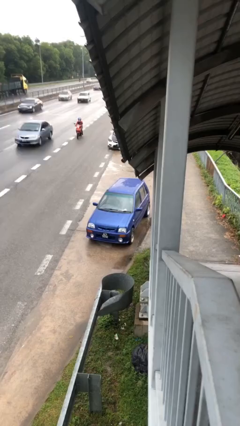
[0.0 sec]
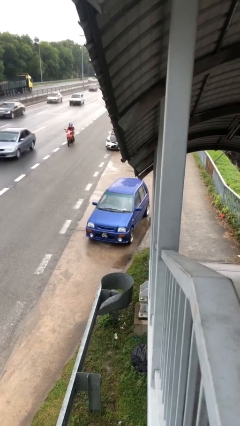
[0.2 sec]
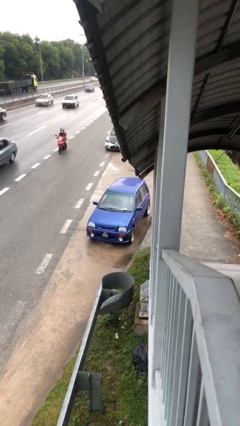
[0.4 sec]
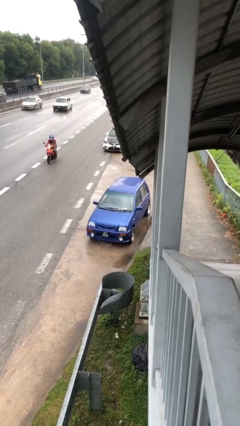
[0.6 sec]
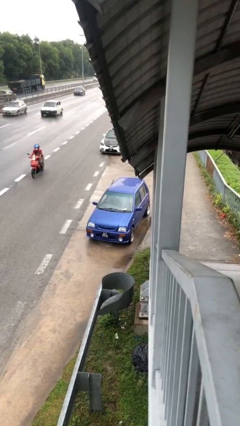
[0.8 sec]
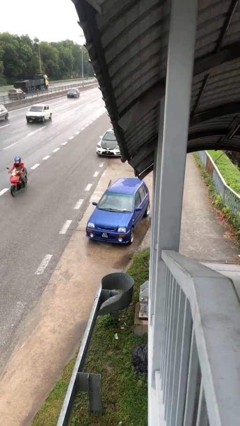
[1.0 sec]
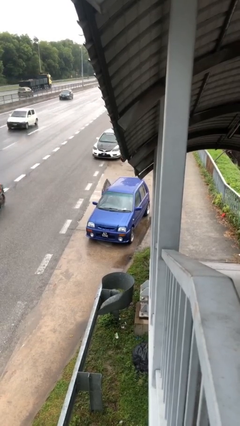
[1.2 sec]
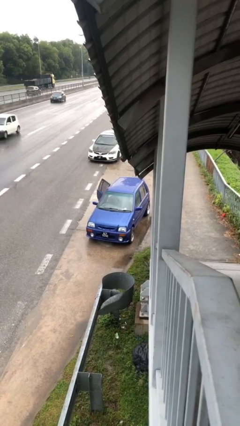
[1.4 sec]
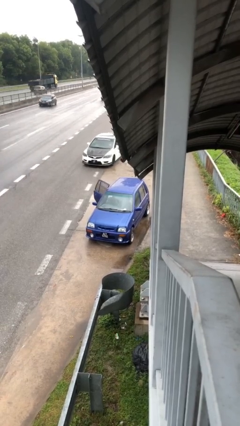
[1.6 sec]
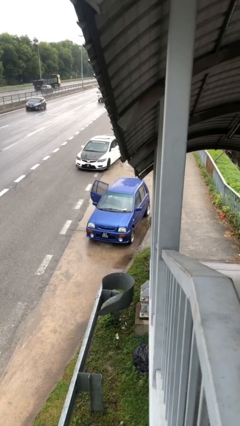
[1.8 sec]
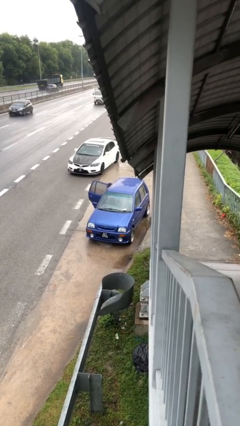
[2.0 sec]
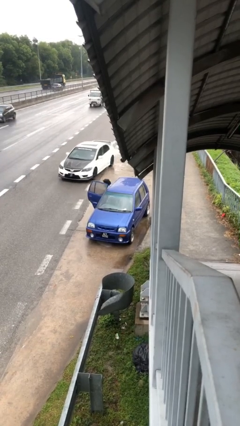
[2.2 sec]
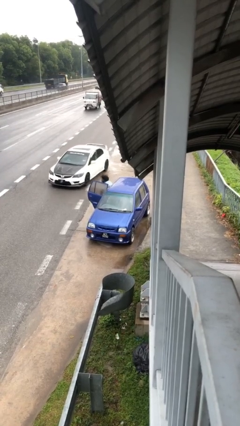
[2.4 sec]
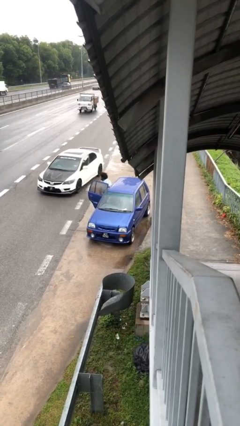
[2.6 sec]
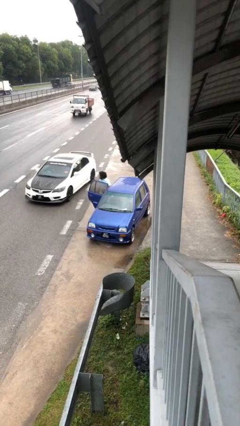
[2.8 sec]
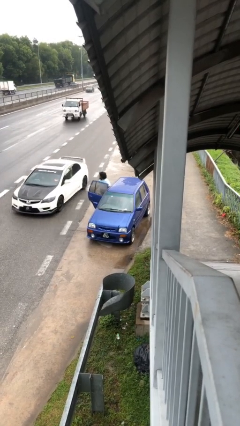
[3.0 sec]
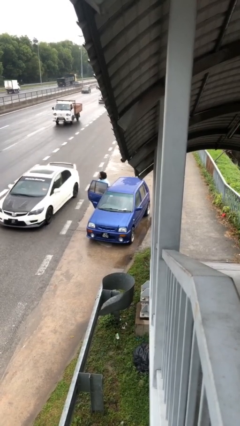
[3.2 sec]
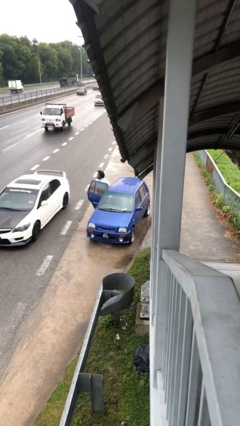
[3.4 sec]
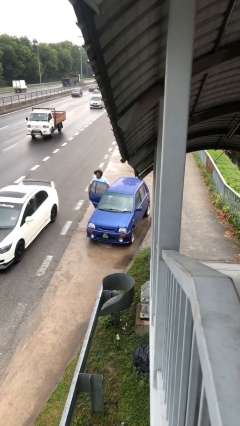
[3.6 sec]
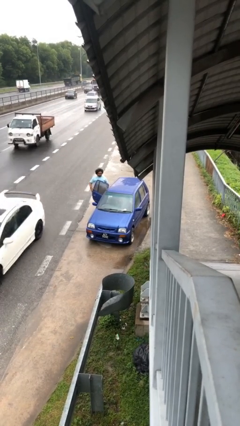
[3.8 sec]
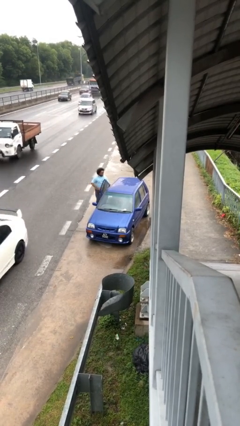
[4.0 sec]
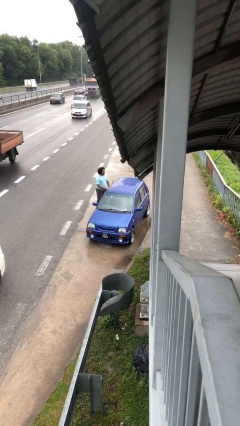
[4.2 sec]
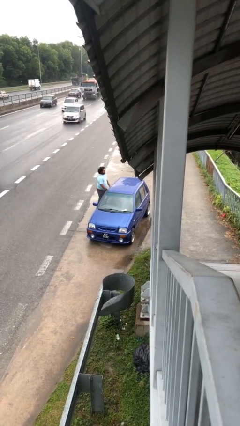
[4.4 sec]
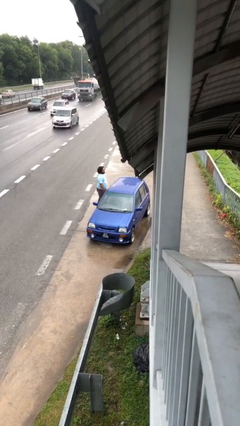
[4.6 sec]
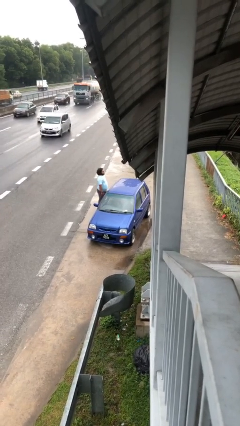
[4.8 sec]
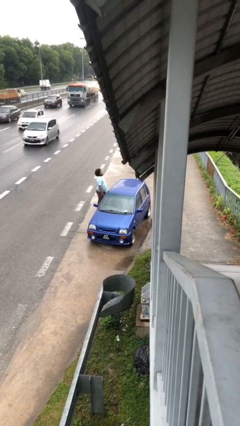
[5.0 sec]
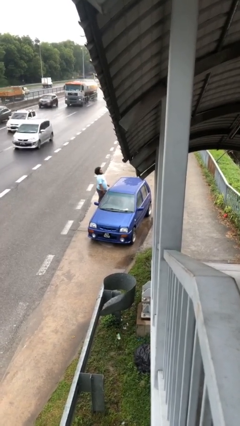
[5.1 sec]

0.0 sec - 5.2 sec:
car drops off person

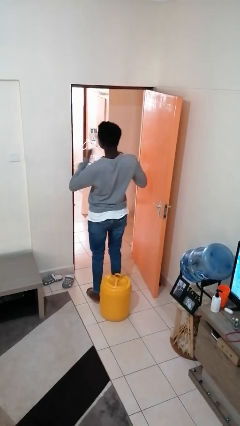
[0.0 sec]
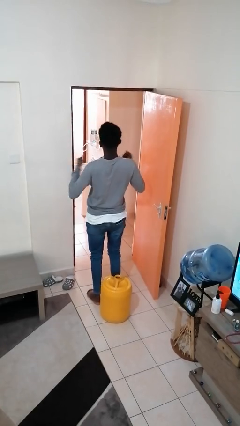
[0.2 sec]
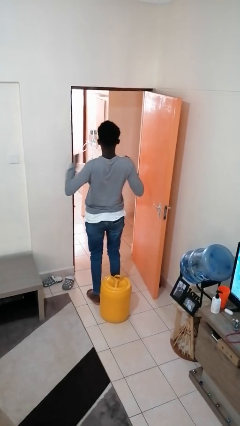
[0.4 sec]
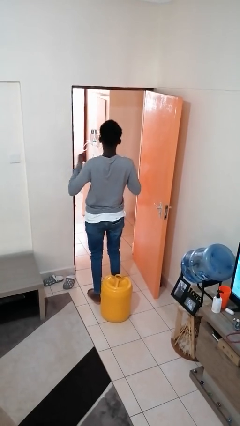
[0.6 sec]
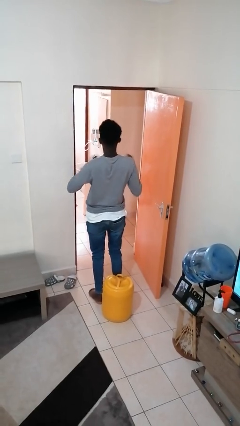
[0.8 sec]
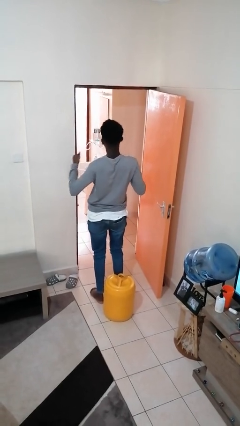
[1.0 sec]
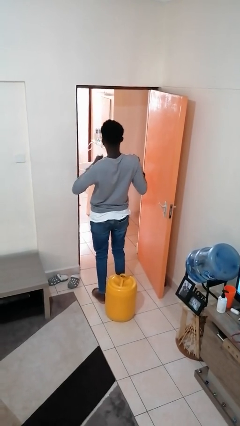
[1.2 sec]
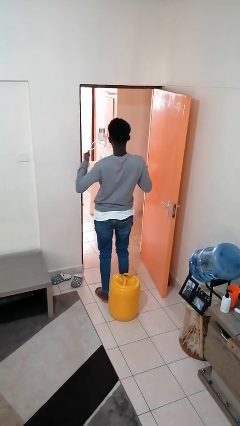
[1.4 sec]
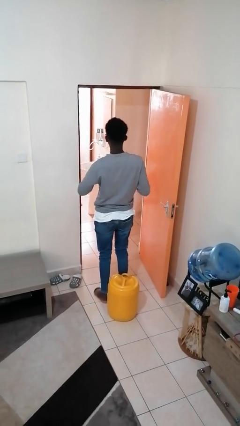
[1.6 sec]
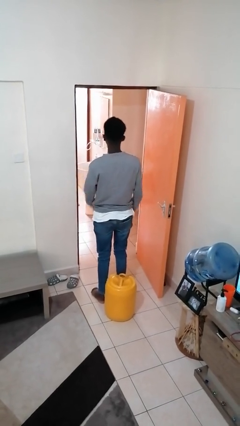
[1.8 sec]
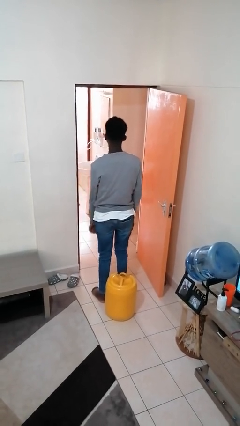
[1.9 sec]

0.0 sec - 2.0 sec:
person drums on chest

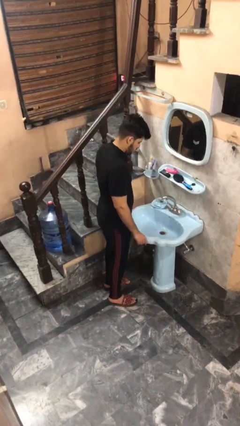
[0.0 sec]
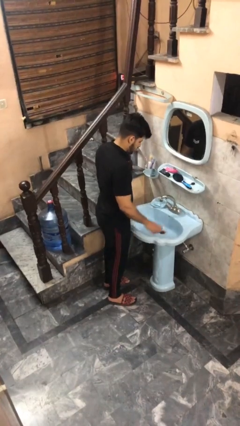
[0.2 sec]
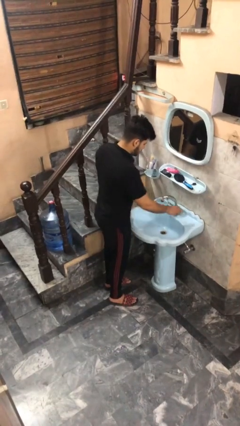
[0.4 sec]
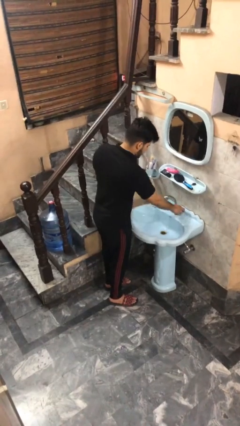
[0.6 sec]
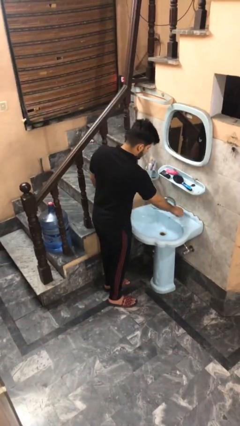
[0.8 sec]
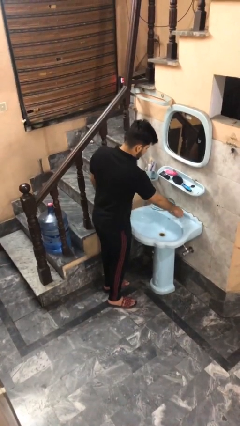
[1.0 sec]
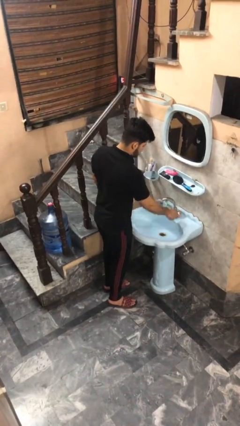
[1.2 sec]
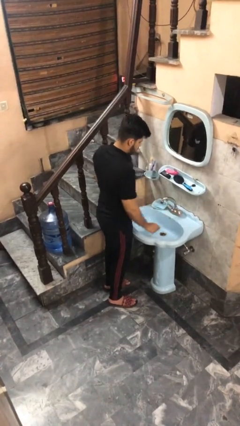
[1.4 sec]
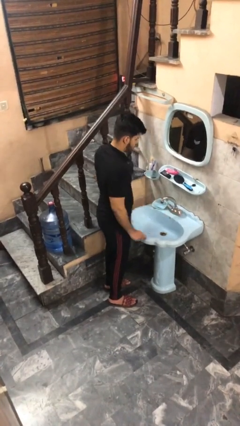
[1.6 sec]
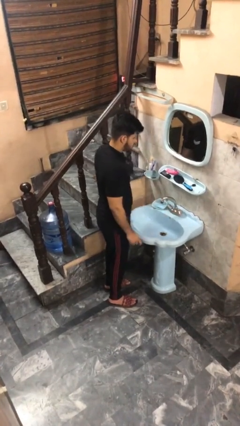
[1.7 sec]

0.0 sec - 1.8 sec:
person turns off faucet

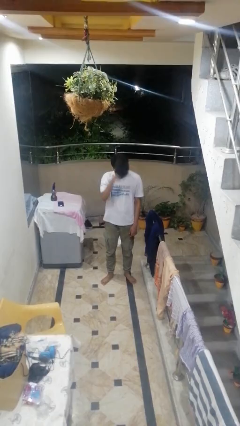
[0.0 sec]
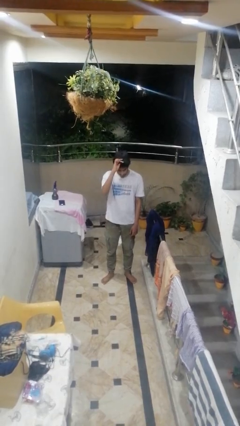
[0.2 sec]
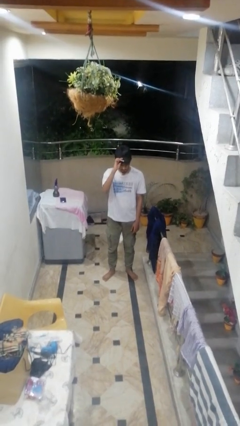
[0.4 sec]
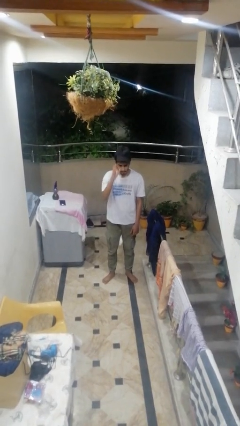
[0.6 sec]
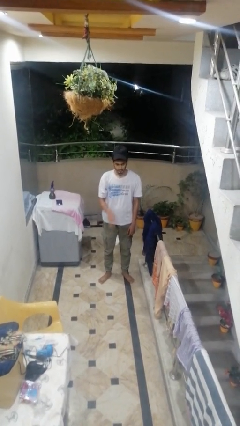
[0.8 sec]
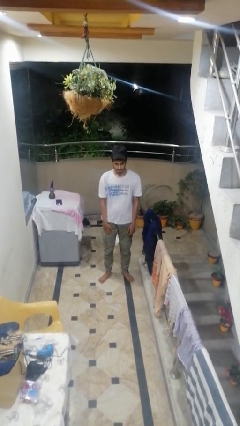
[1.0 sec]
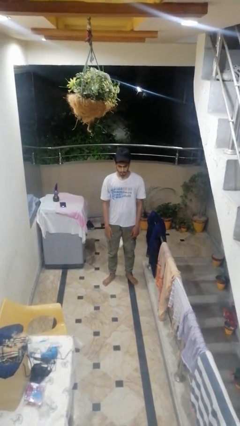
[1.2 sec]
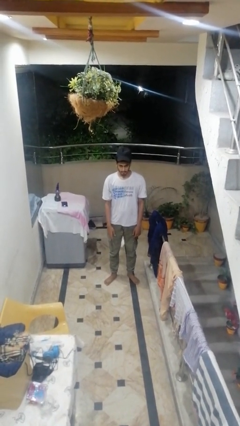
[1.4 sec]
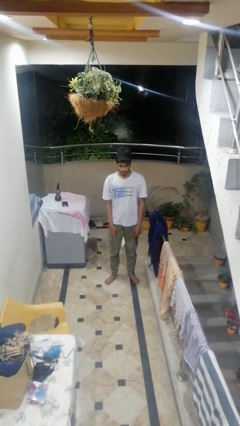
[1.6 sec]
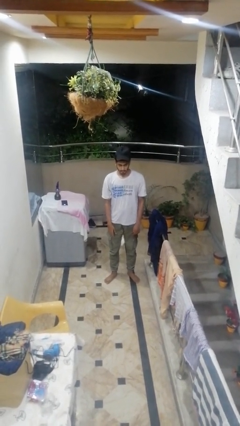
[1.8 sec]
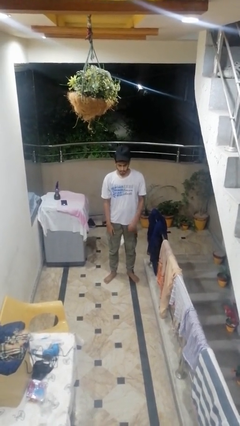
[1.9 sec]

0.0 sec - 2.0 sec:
person puts on hat

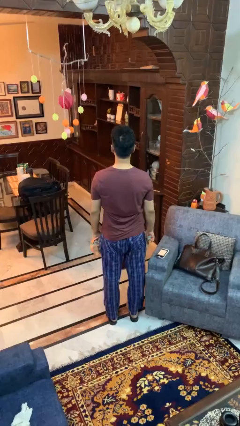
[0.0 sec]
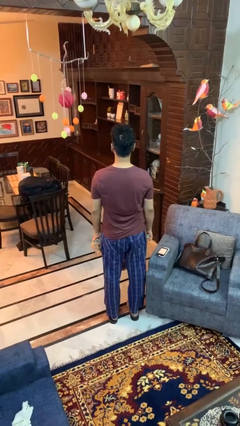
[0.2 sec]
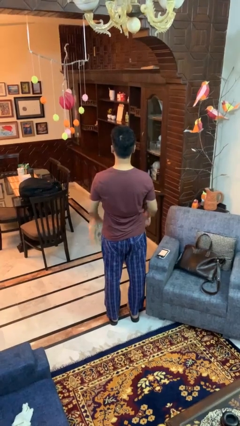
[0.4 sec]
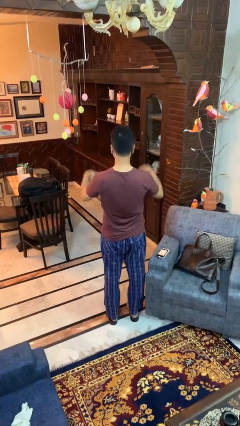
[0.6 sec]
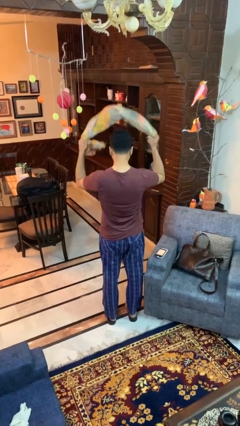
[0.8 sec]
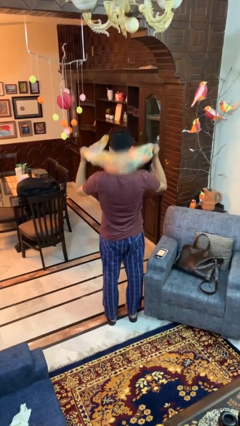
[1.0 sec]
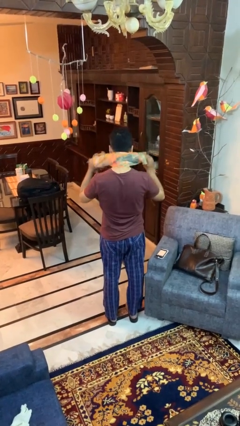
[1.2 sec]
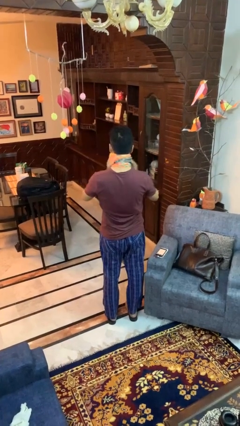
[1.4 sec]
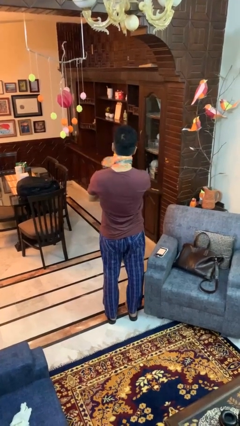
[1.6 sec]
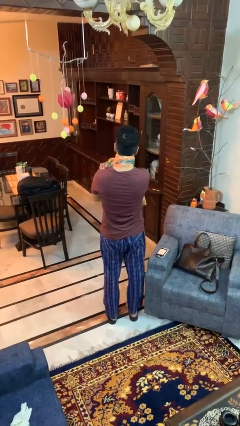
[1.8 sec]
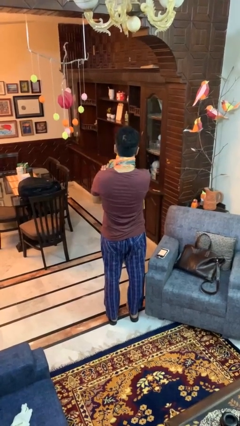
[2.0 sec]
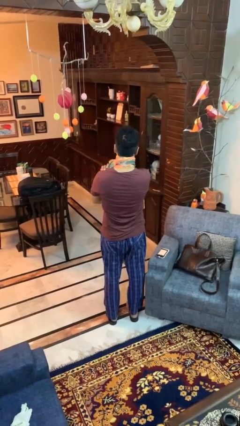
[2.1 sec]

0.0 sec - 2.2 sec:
person puts on scarf

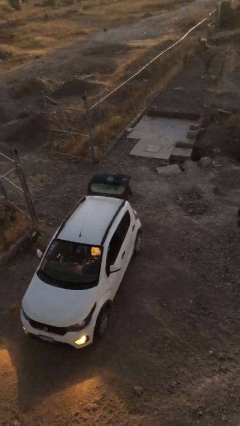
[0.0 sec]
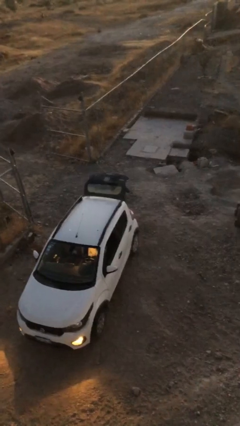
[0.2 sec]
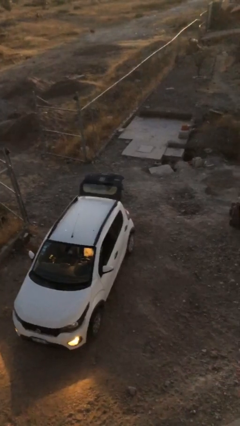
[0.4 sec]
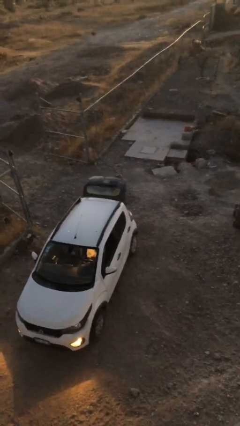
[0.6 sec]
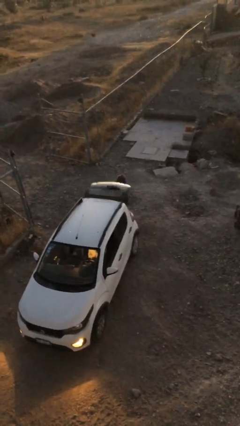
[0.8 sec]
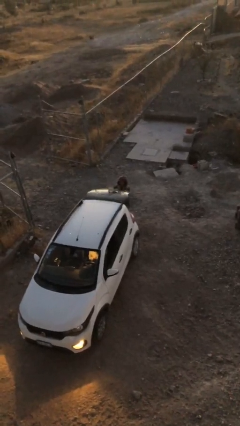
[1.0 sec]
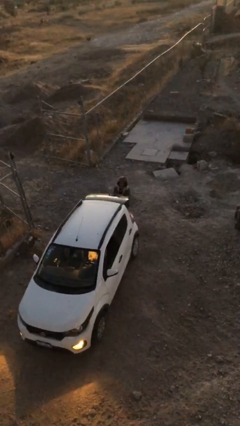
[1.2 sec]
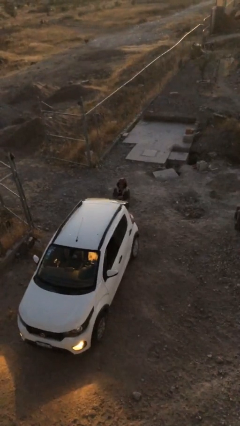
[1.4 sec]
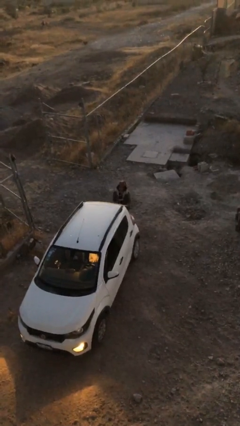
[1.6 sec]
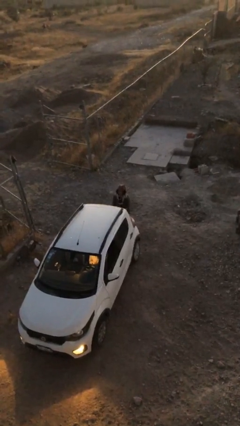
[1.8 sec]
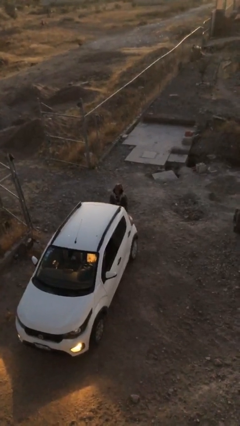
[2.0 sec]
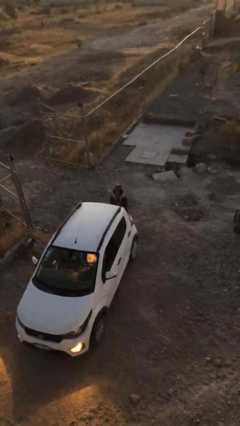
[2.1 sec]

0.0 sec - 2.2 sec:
person closes car trunk

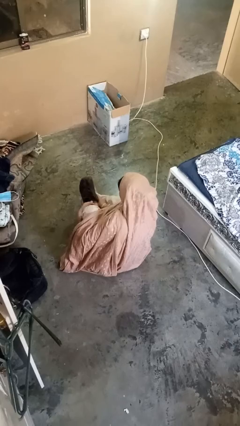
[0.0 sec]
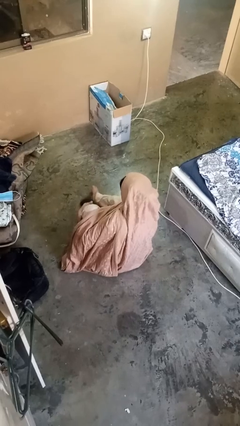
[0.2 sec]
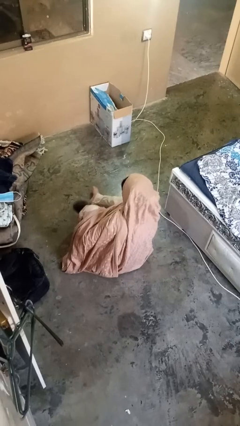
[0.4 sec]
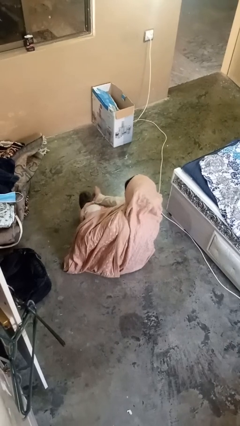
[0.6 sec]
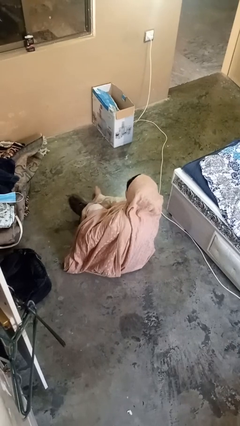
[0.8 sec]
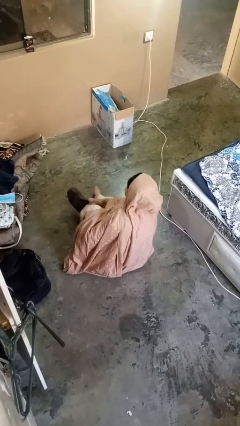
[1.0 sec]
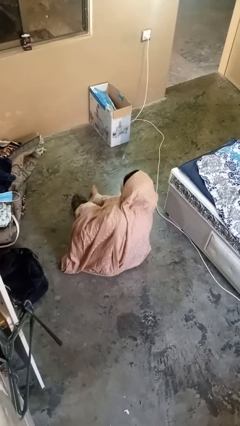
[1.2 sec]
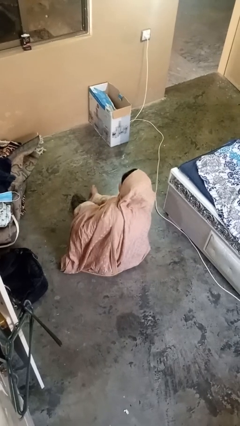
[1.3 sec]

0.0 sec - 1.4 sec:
person takes off shoes

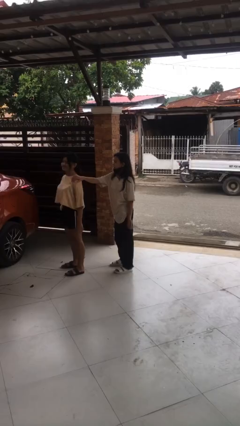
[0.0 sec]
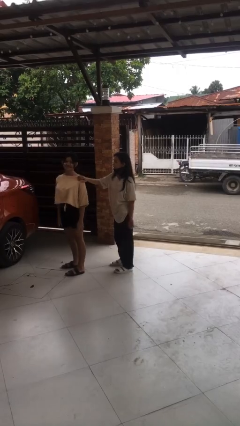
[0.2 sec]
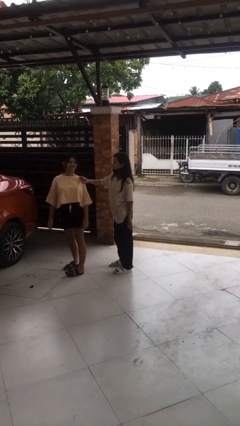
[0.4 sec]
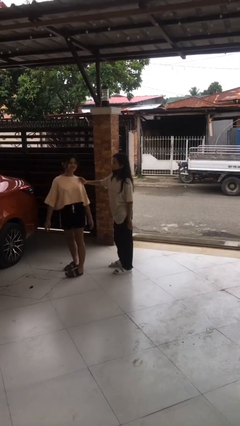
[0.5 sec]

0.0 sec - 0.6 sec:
person grabs person by shoulder
